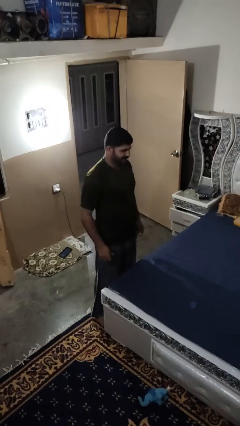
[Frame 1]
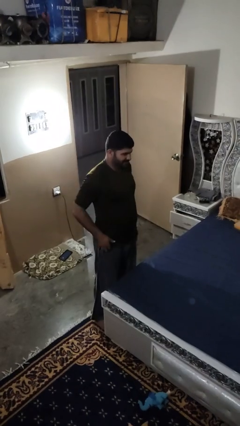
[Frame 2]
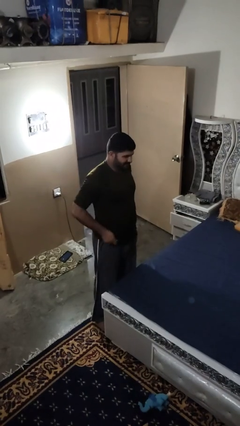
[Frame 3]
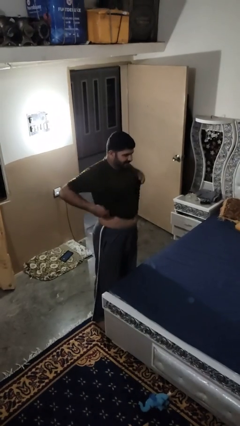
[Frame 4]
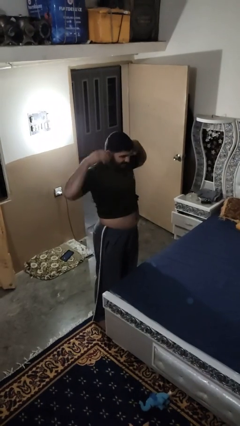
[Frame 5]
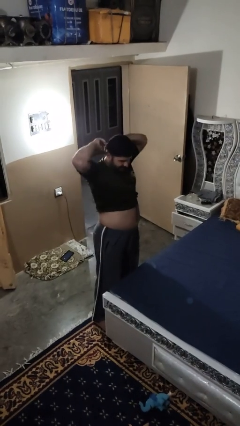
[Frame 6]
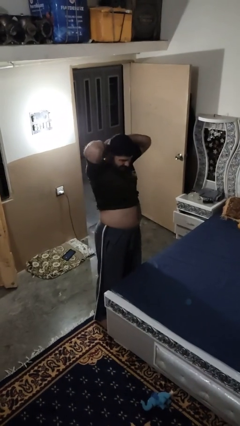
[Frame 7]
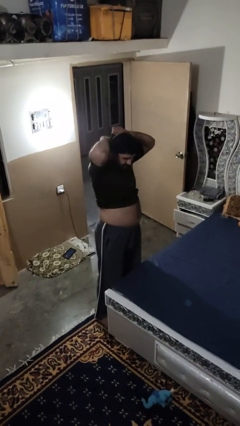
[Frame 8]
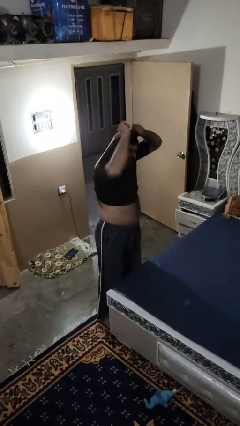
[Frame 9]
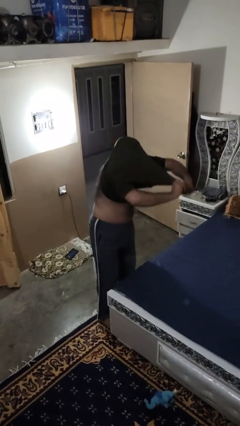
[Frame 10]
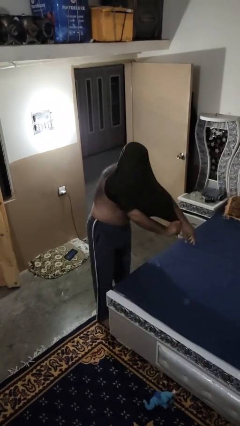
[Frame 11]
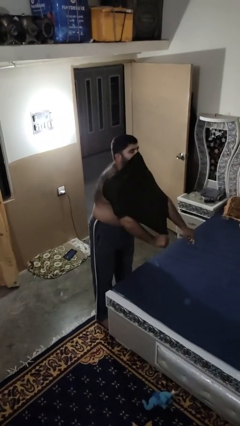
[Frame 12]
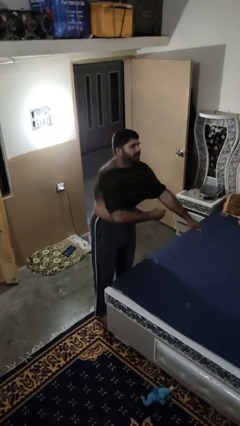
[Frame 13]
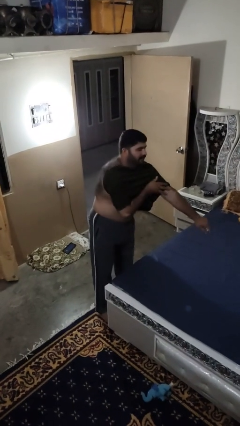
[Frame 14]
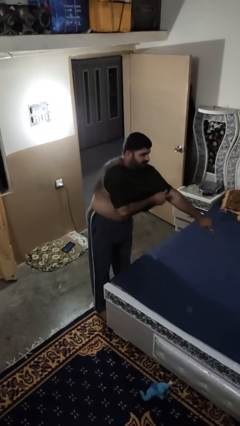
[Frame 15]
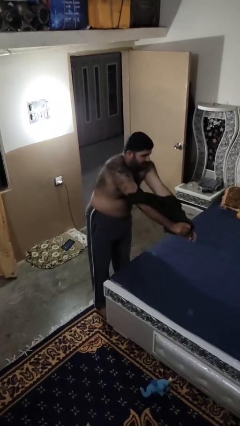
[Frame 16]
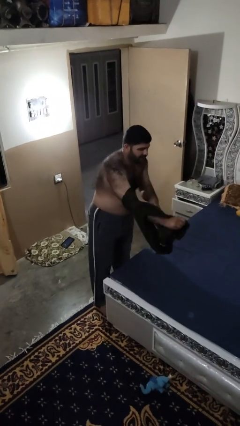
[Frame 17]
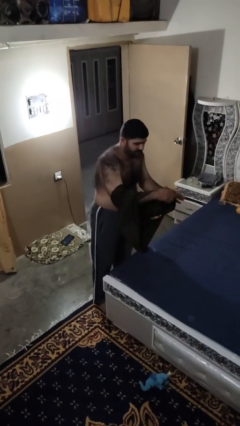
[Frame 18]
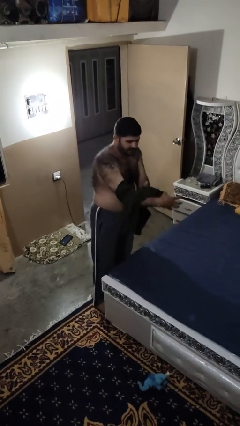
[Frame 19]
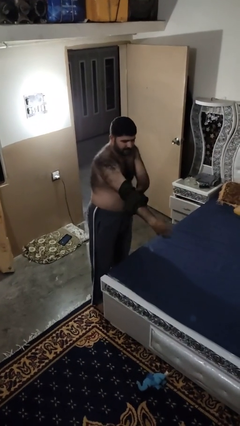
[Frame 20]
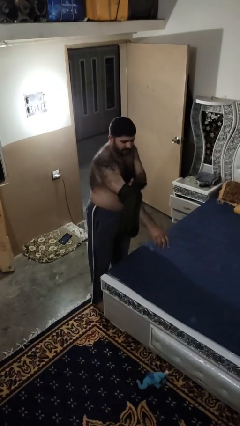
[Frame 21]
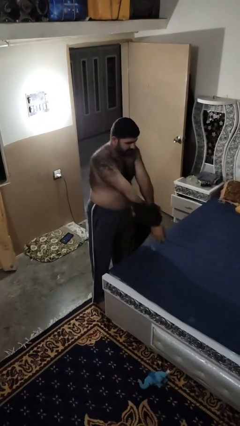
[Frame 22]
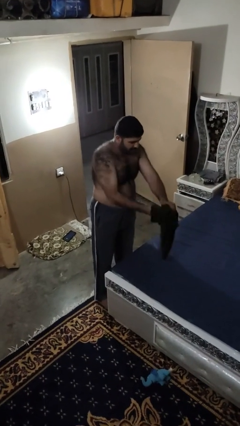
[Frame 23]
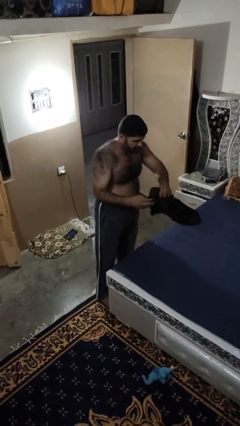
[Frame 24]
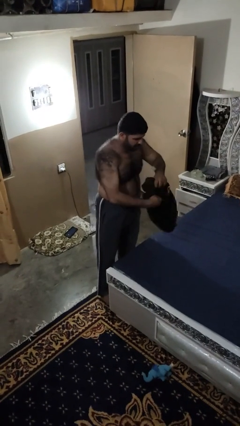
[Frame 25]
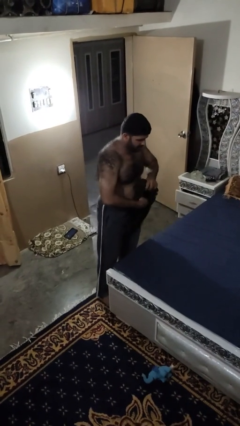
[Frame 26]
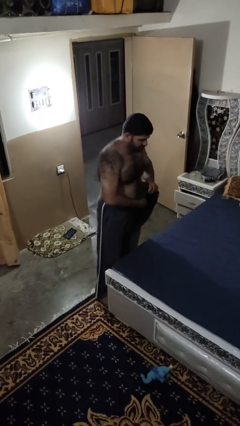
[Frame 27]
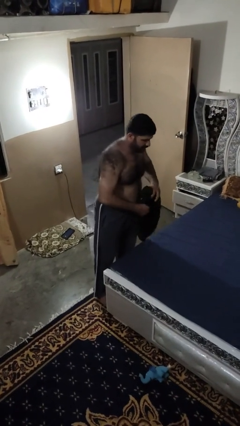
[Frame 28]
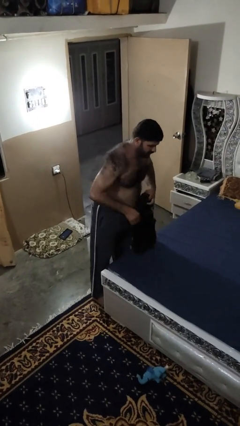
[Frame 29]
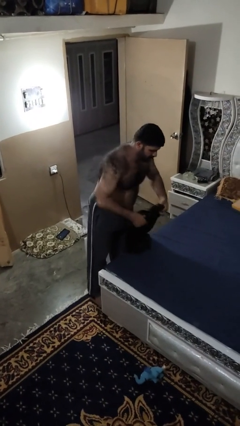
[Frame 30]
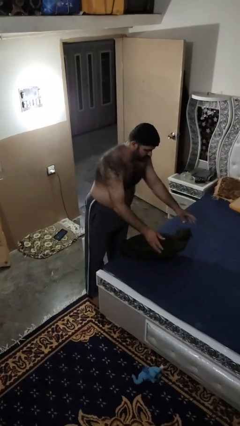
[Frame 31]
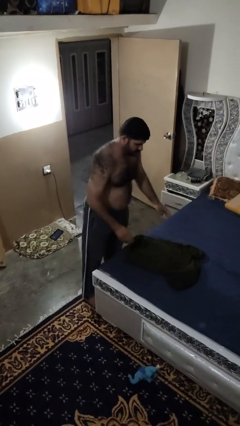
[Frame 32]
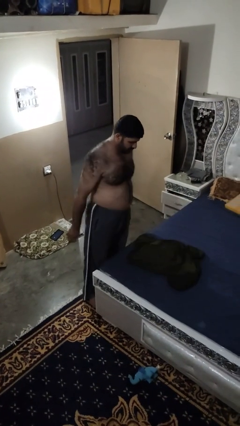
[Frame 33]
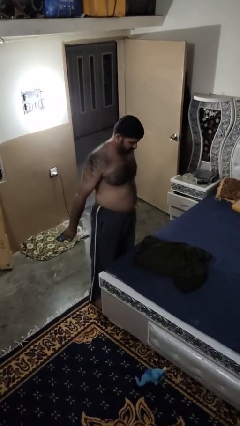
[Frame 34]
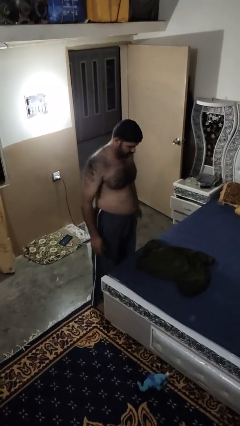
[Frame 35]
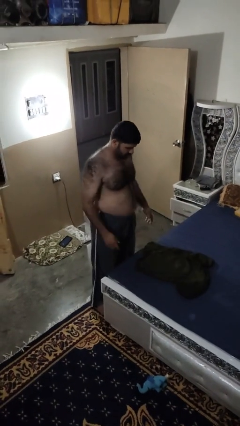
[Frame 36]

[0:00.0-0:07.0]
person takes off shirt

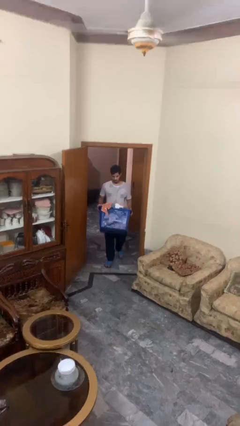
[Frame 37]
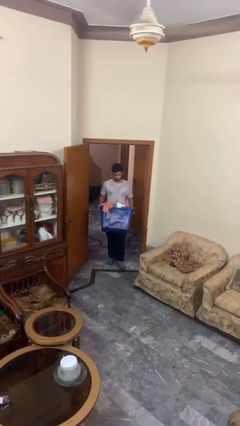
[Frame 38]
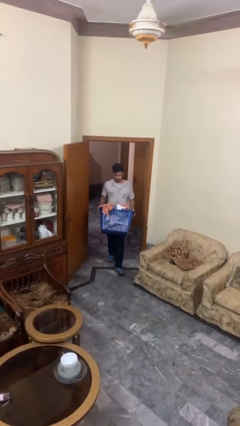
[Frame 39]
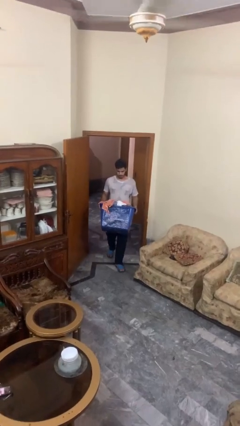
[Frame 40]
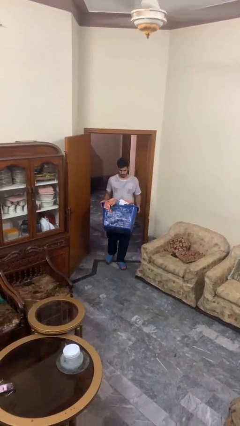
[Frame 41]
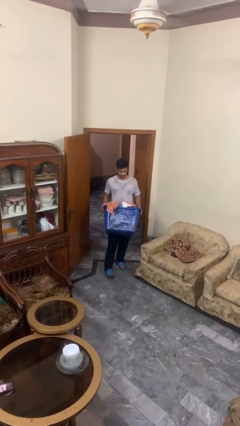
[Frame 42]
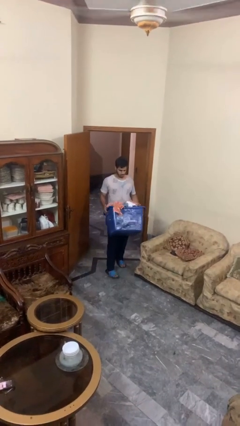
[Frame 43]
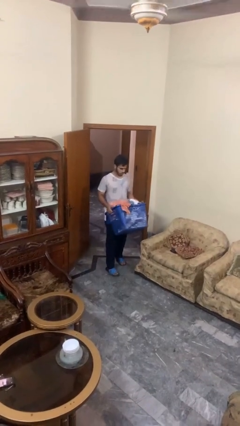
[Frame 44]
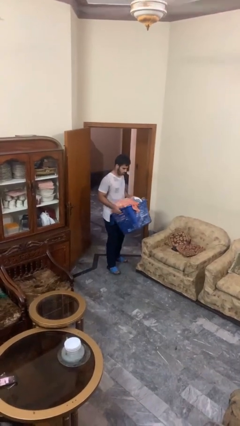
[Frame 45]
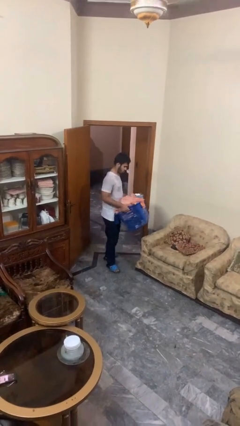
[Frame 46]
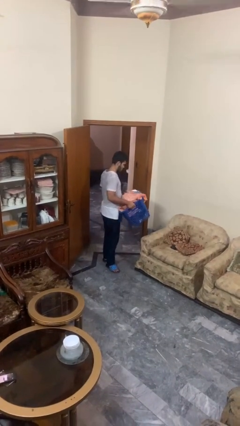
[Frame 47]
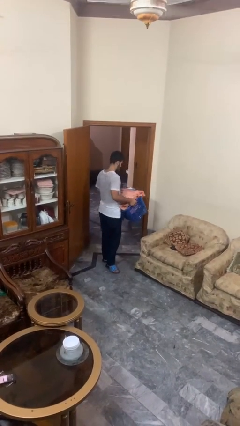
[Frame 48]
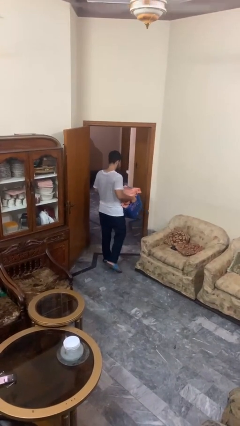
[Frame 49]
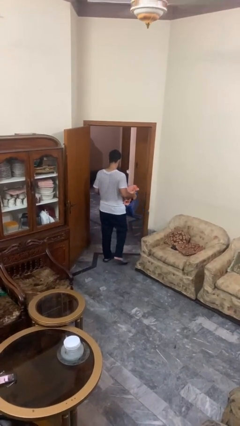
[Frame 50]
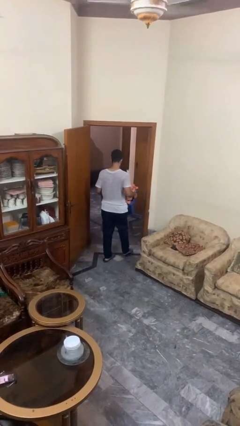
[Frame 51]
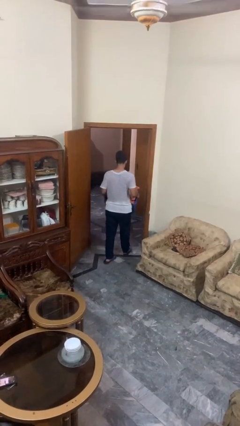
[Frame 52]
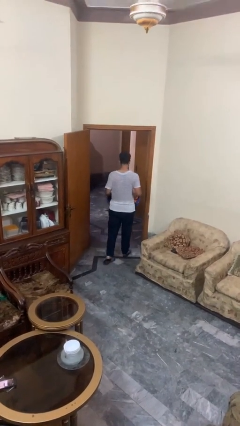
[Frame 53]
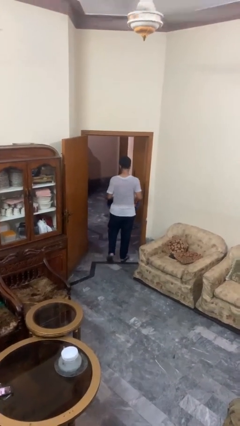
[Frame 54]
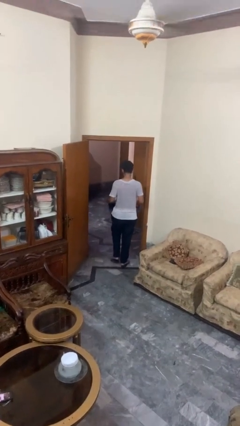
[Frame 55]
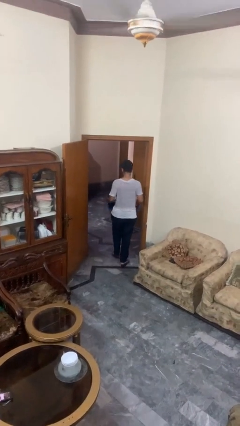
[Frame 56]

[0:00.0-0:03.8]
person carries laundry basket

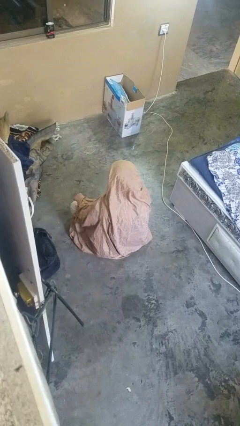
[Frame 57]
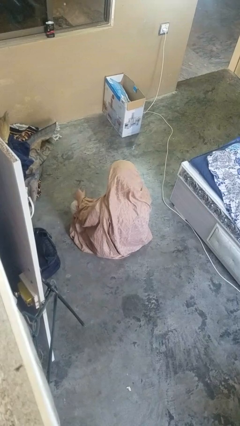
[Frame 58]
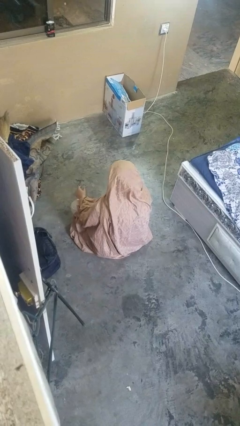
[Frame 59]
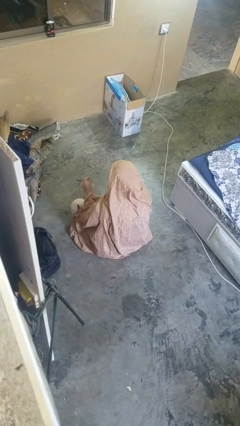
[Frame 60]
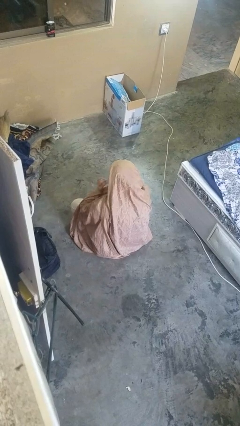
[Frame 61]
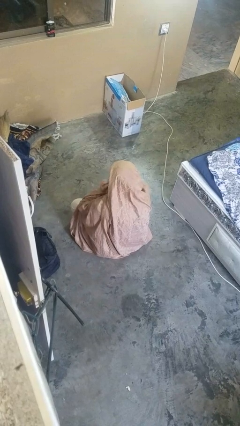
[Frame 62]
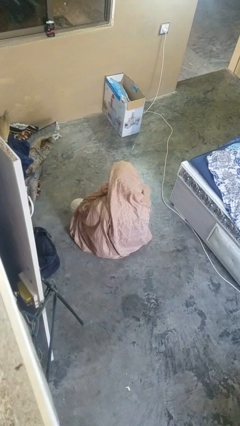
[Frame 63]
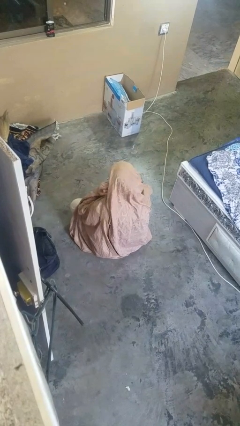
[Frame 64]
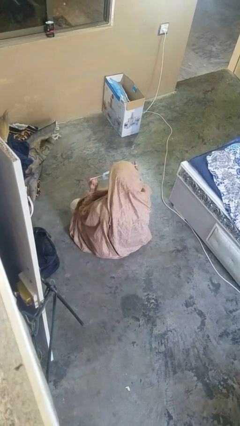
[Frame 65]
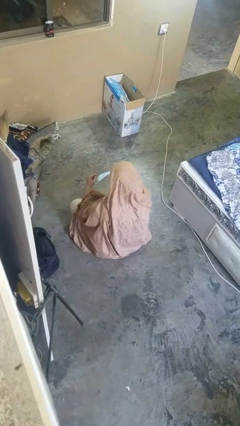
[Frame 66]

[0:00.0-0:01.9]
person takes off facemask

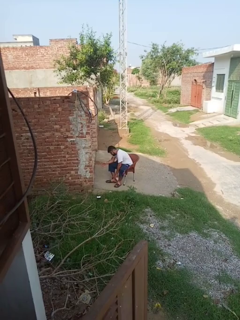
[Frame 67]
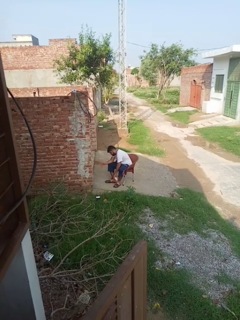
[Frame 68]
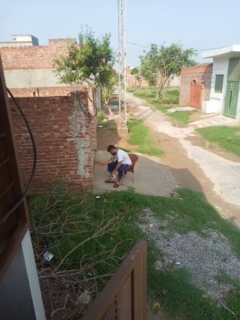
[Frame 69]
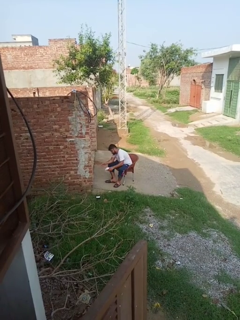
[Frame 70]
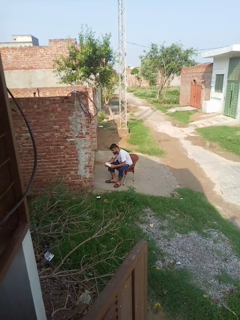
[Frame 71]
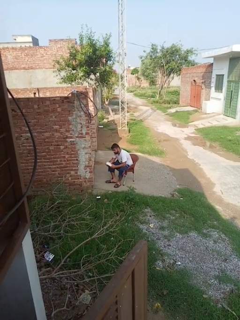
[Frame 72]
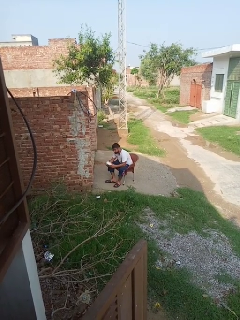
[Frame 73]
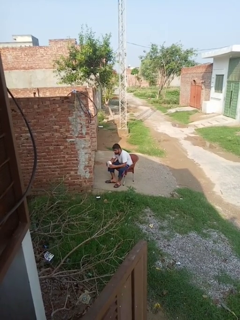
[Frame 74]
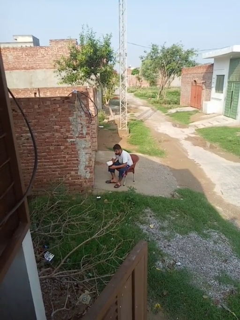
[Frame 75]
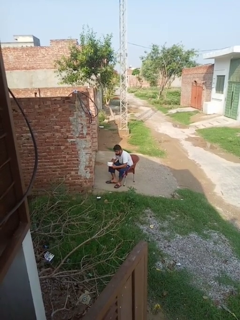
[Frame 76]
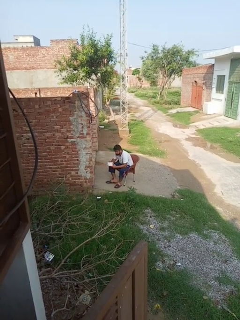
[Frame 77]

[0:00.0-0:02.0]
person picks up object from floor

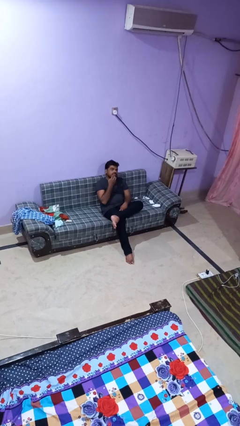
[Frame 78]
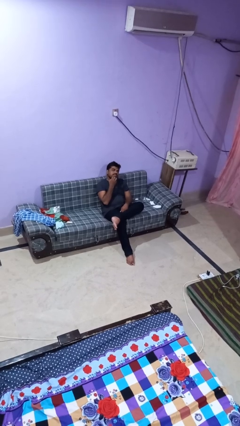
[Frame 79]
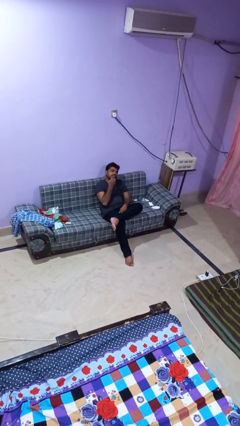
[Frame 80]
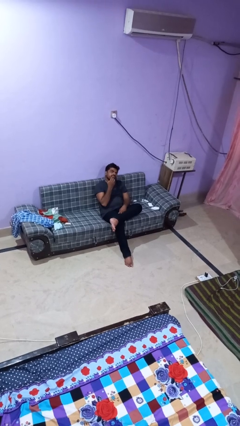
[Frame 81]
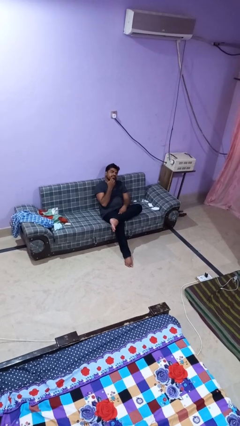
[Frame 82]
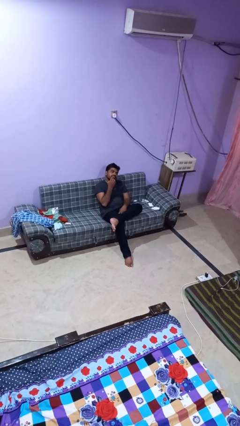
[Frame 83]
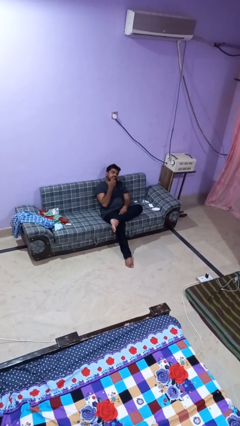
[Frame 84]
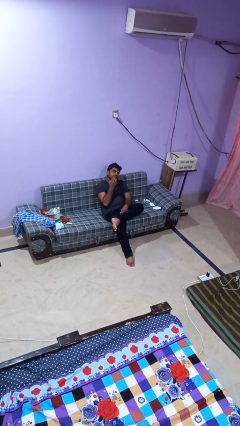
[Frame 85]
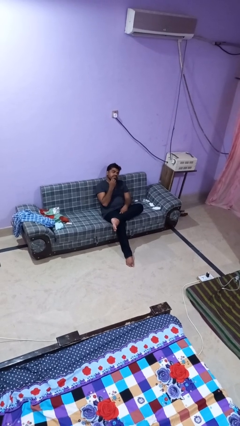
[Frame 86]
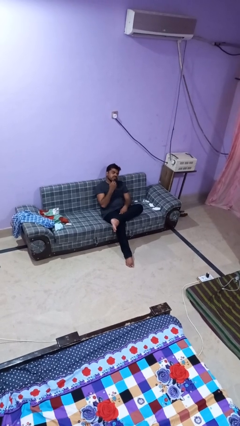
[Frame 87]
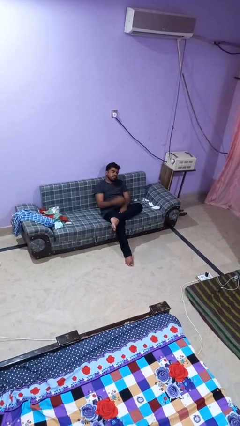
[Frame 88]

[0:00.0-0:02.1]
person strokes chin

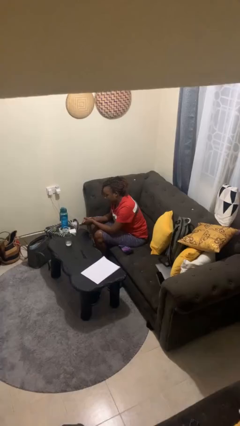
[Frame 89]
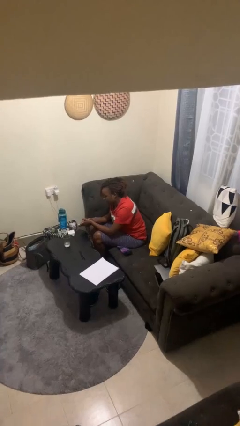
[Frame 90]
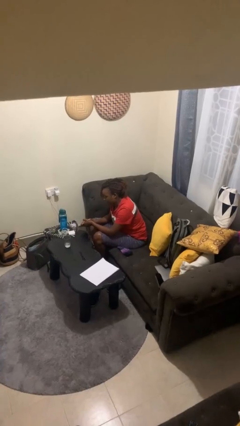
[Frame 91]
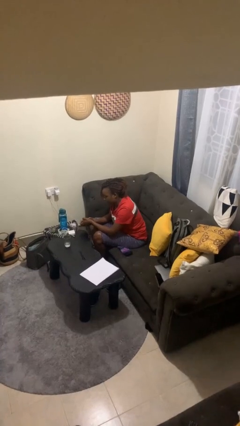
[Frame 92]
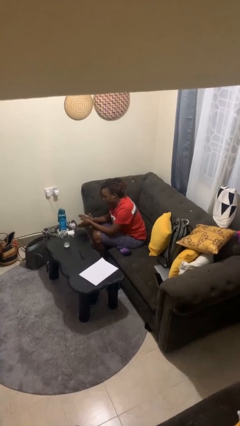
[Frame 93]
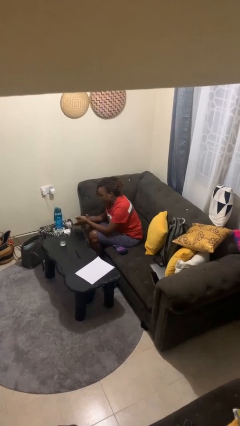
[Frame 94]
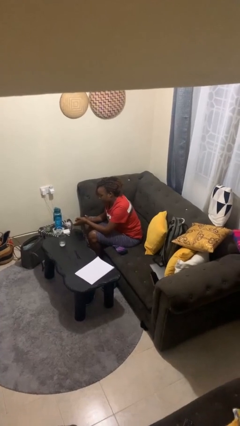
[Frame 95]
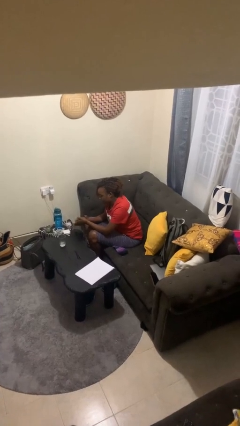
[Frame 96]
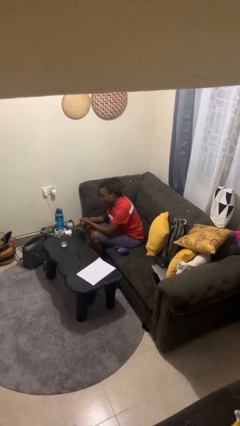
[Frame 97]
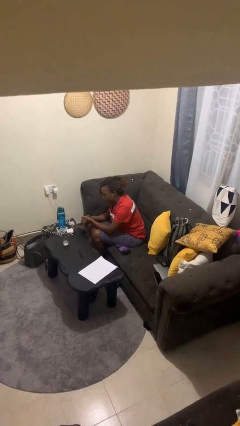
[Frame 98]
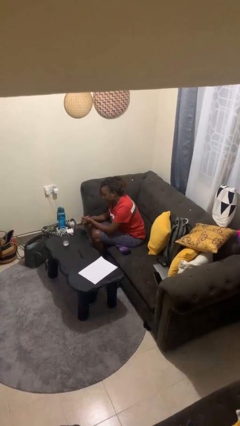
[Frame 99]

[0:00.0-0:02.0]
person claps hands
